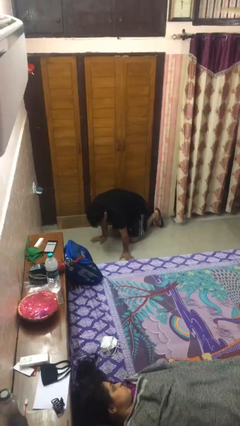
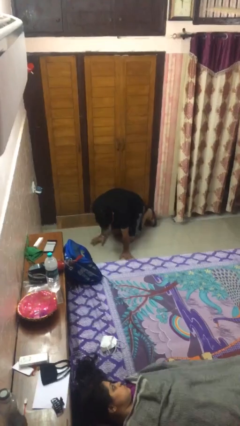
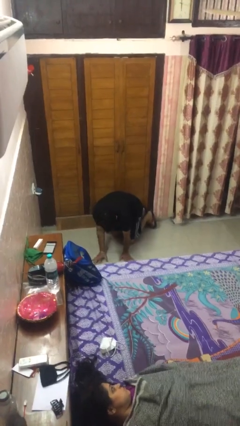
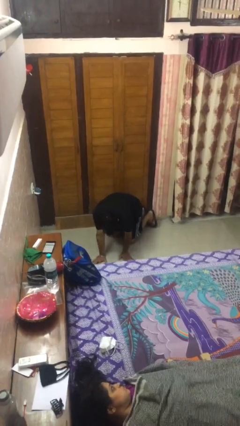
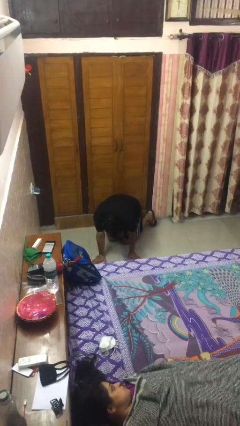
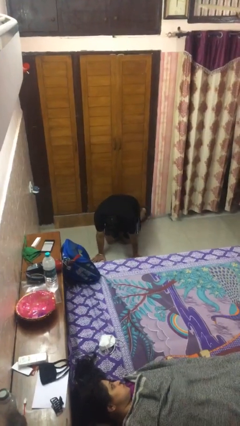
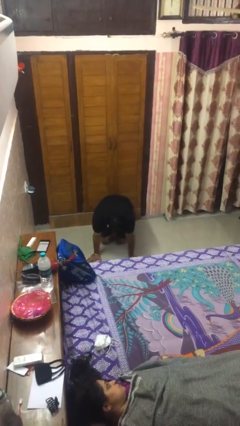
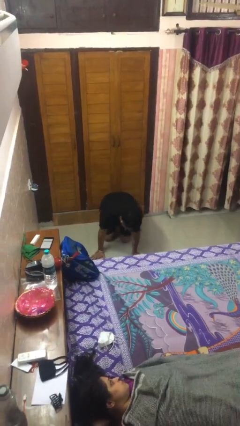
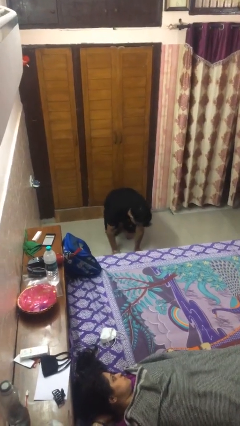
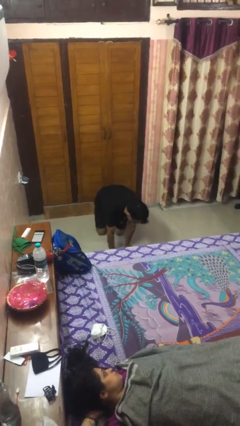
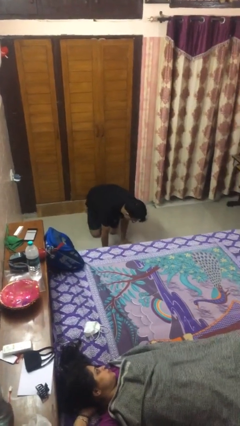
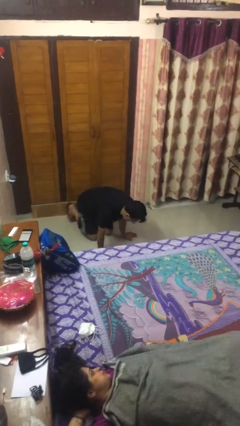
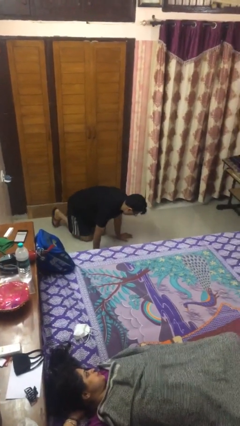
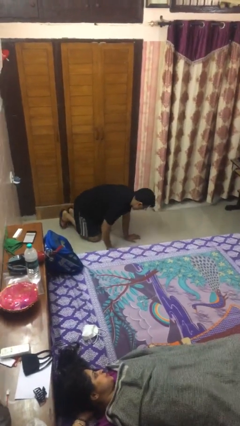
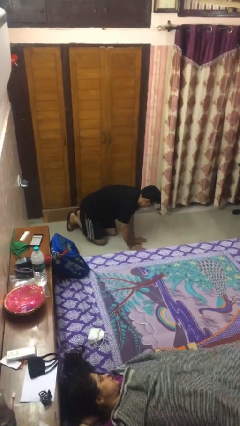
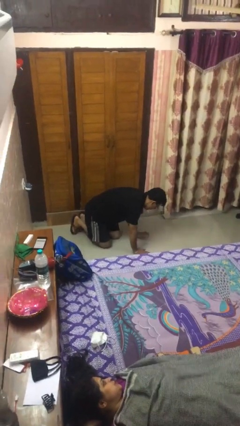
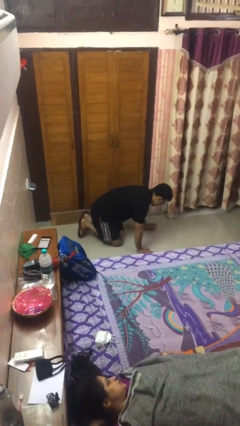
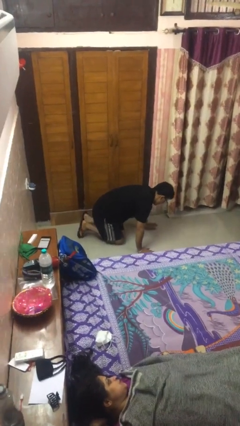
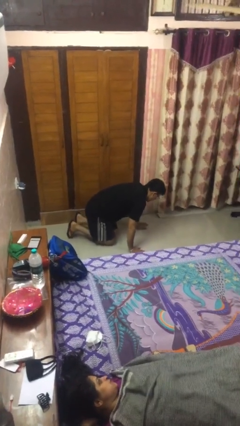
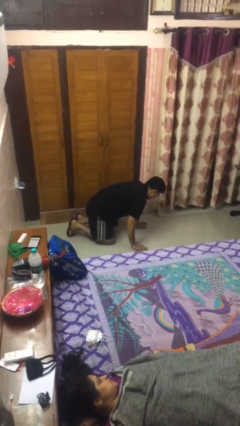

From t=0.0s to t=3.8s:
person crawls

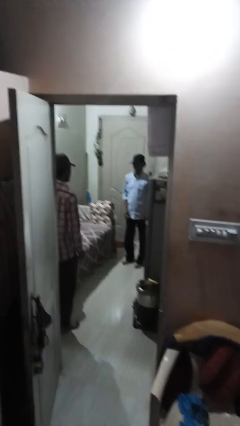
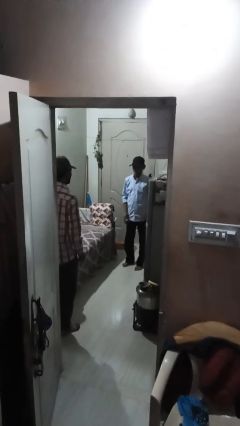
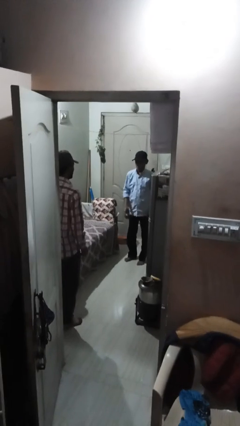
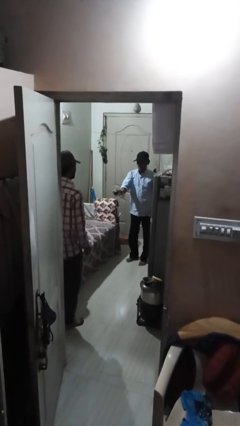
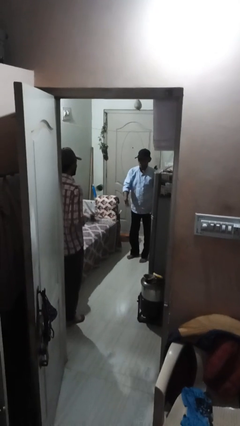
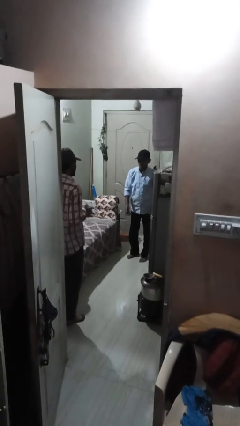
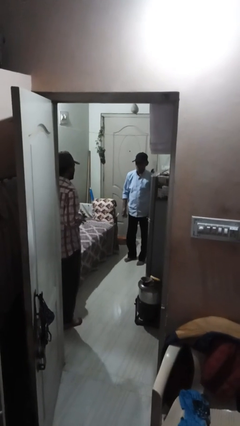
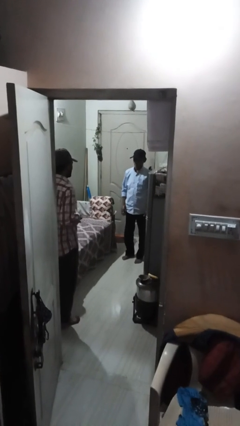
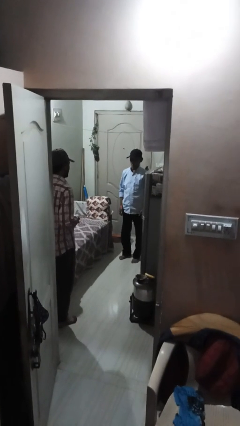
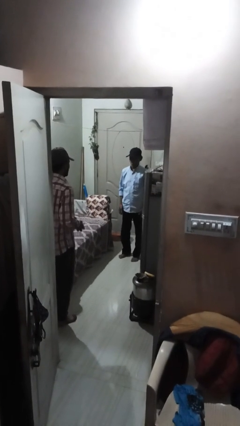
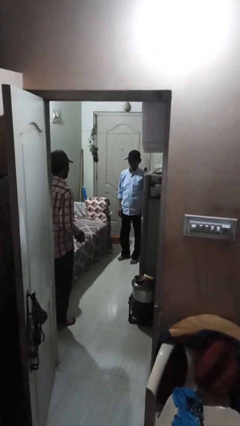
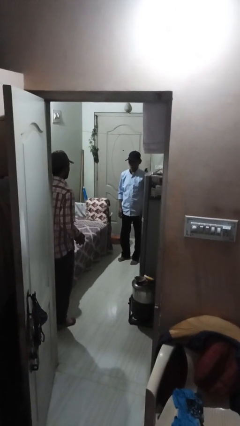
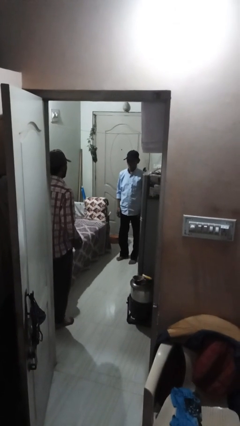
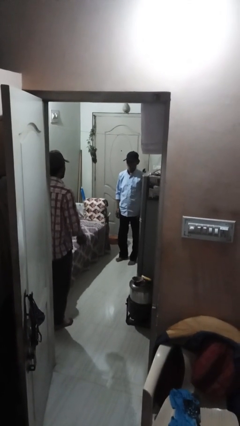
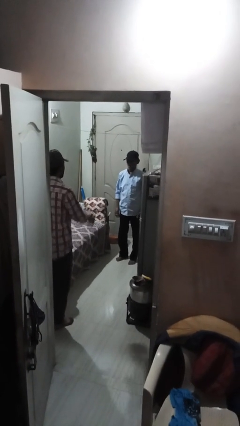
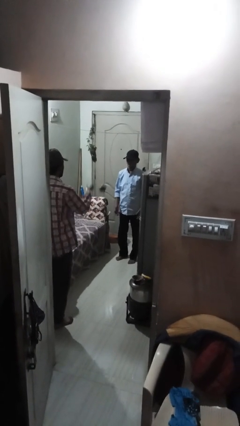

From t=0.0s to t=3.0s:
person throws object to person

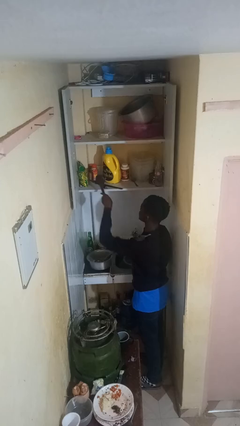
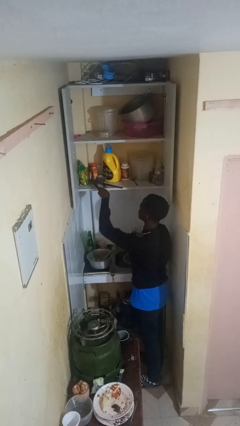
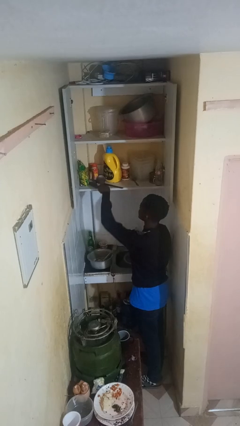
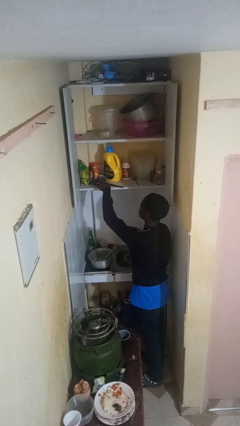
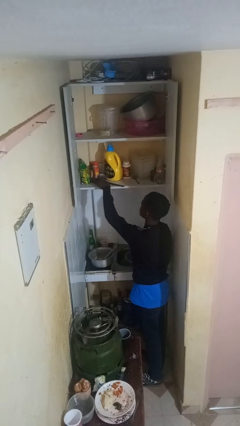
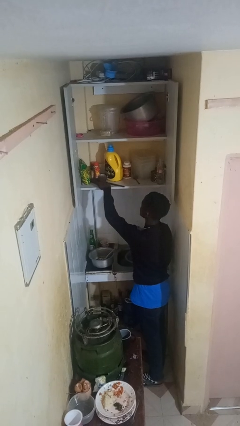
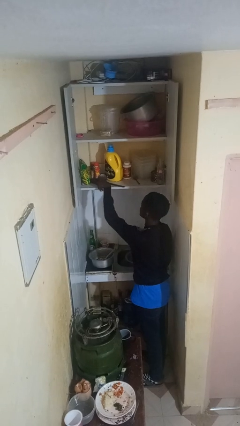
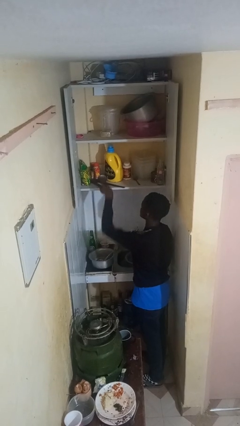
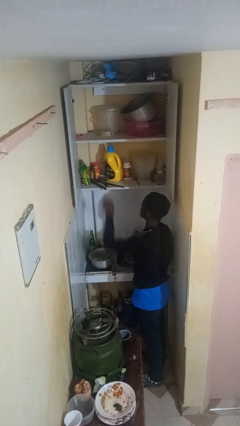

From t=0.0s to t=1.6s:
person puts object into kitchen drawer

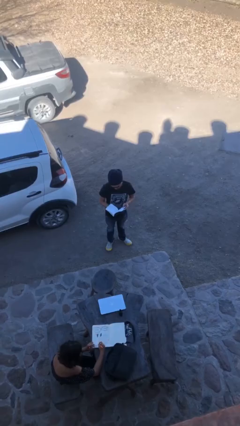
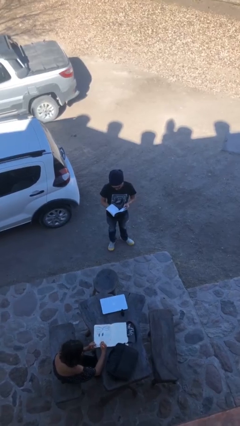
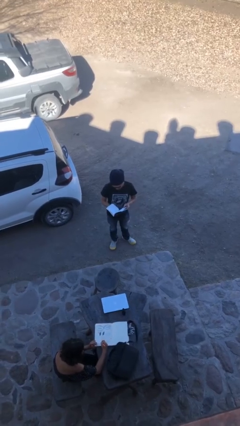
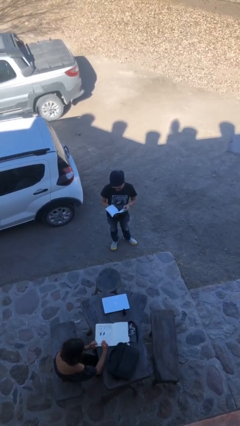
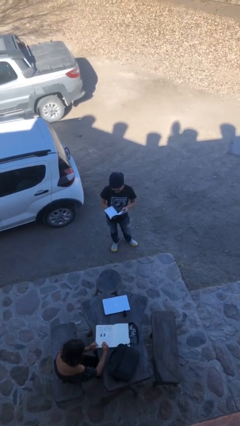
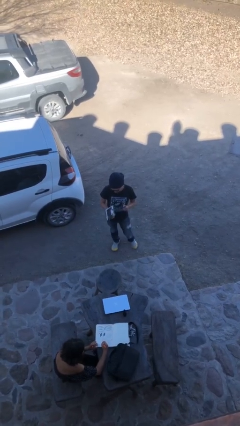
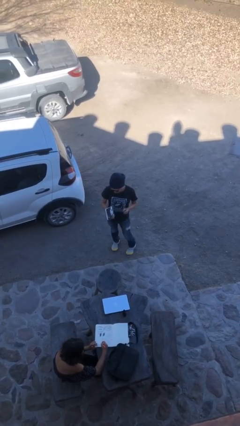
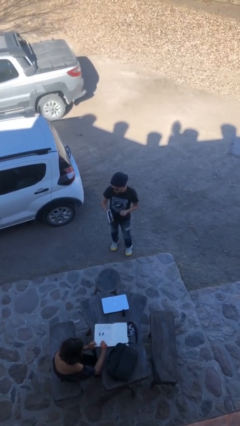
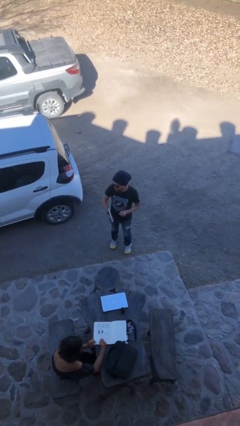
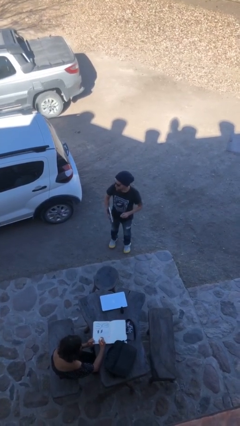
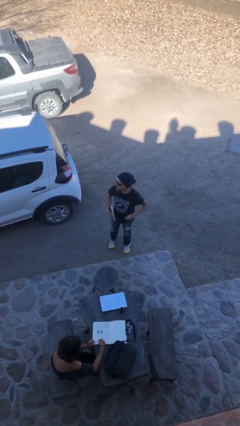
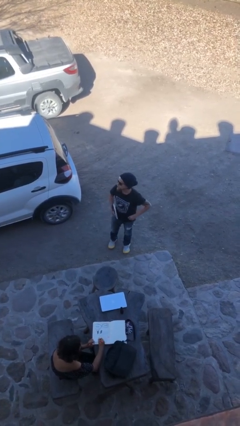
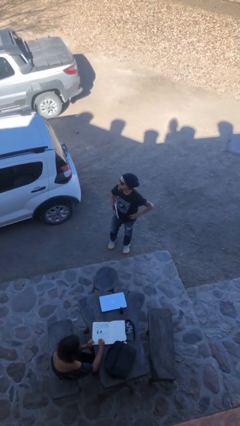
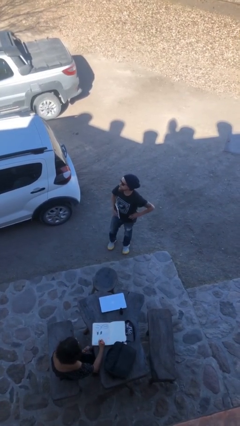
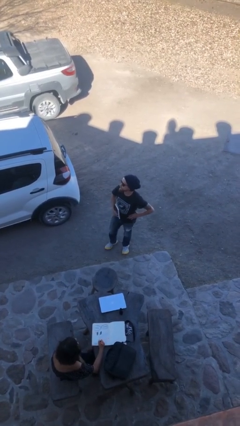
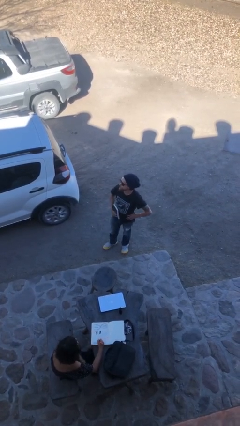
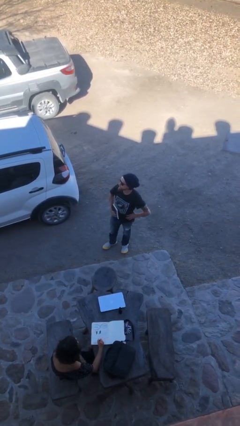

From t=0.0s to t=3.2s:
person reads document

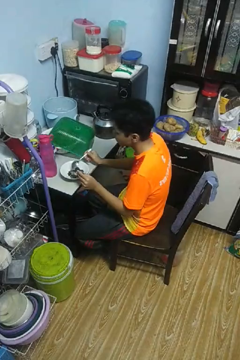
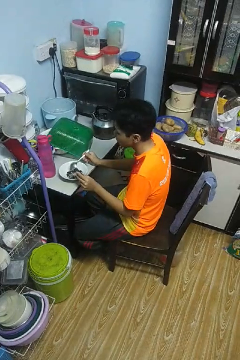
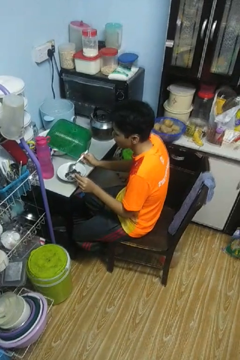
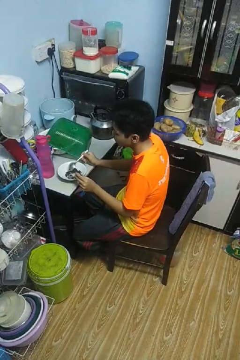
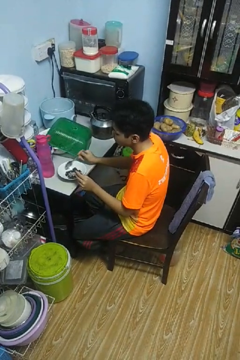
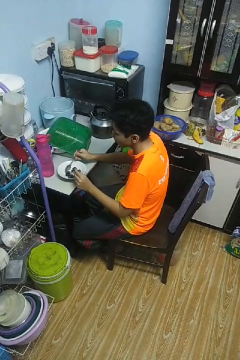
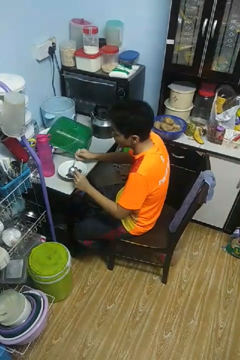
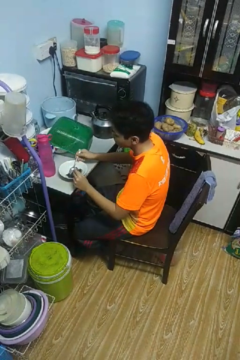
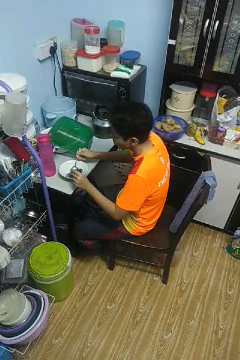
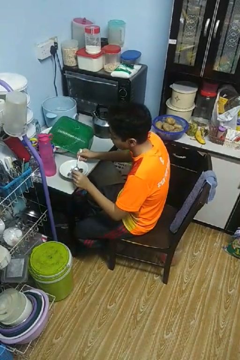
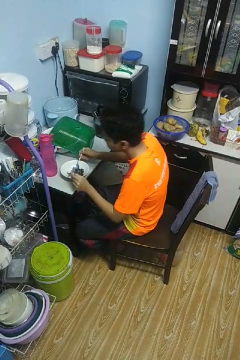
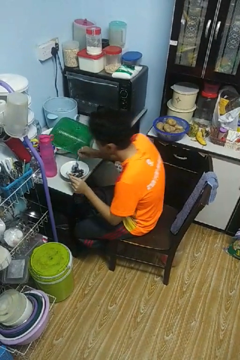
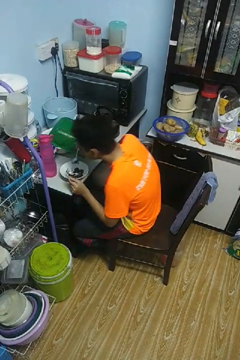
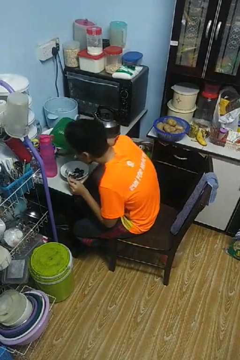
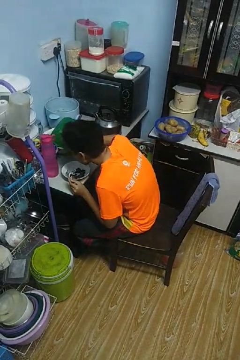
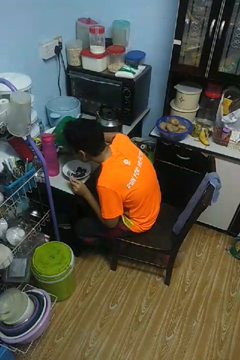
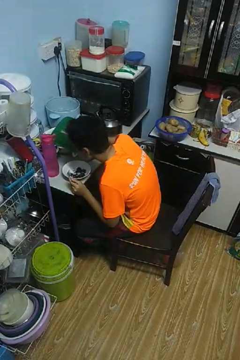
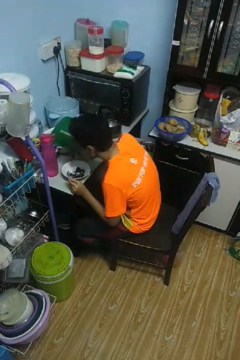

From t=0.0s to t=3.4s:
person eats with utensil

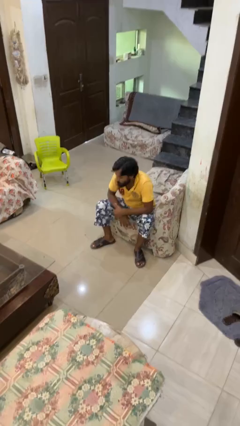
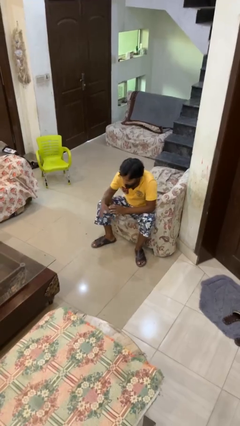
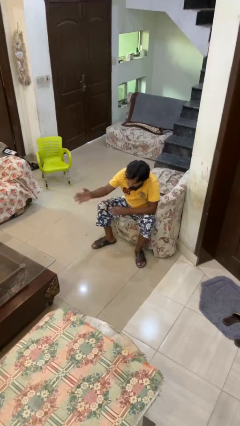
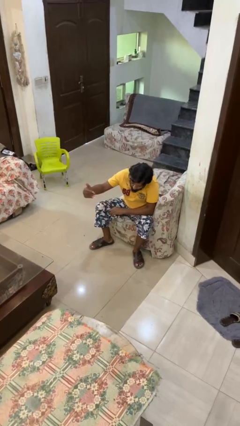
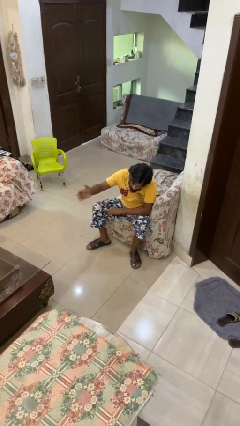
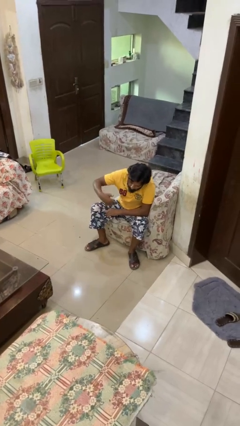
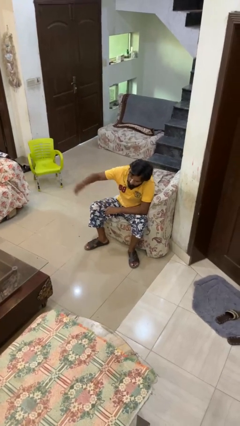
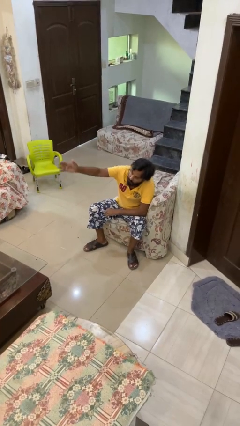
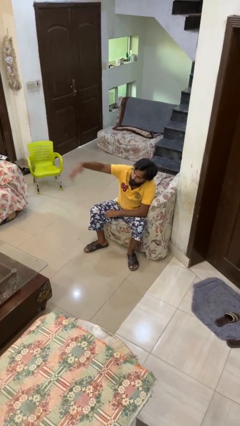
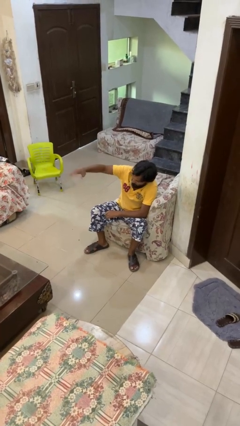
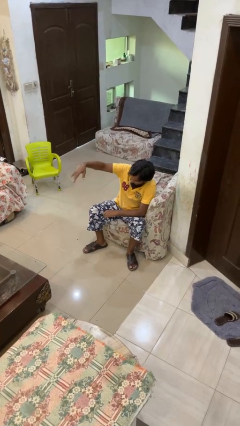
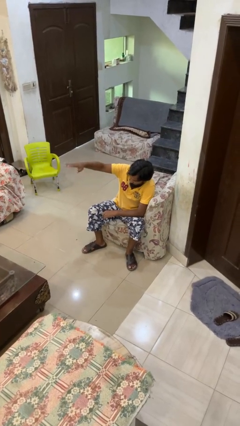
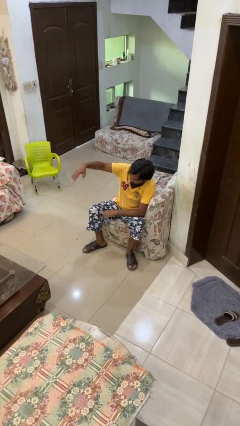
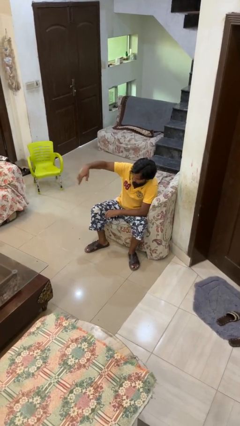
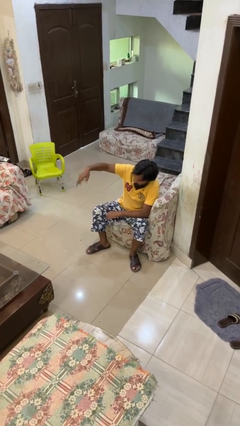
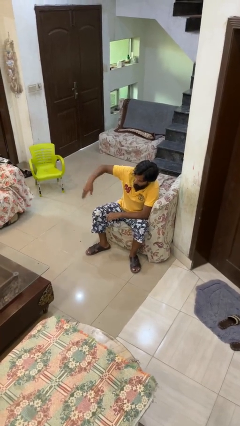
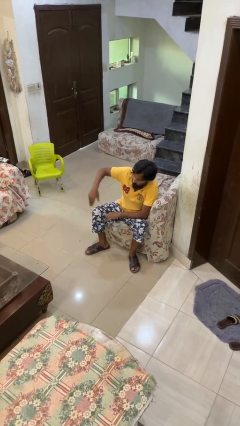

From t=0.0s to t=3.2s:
person gestures come here
